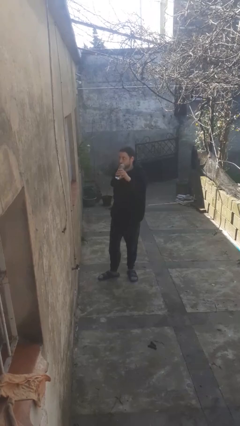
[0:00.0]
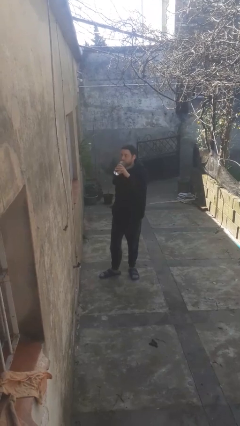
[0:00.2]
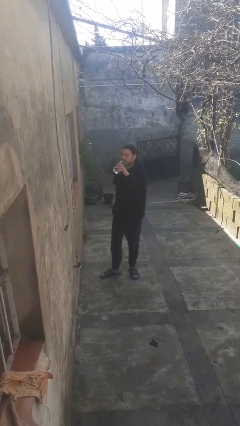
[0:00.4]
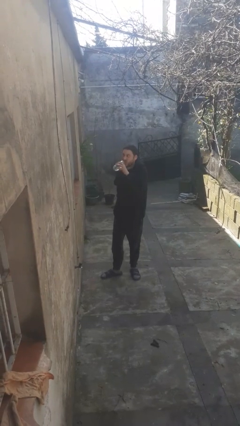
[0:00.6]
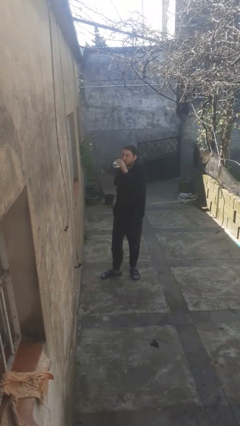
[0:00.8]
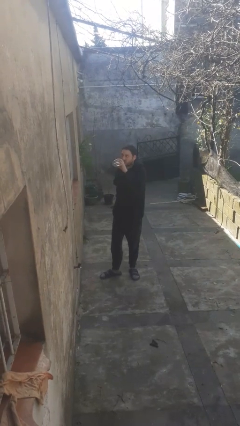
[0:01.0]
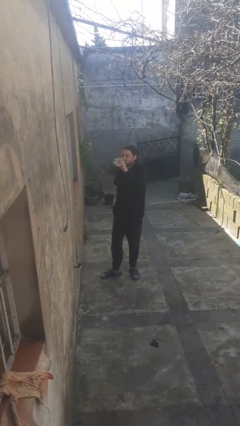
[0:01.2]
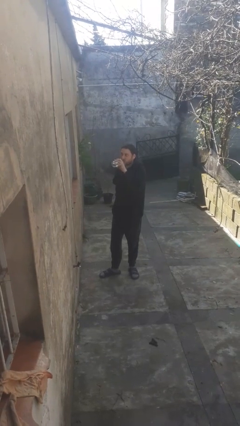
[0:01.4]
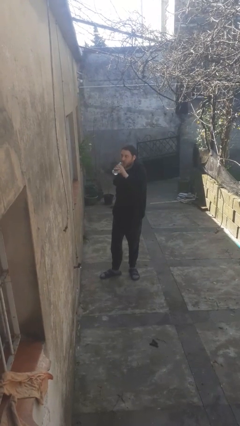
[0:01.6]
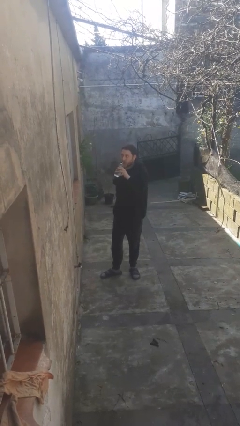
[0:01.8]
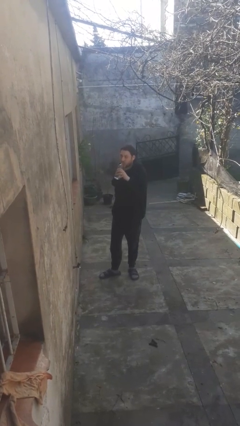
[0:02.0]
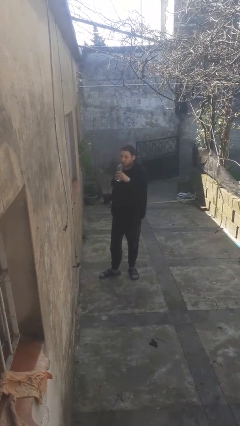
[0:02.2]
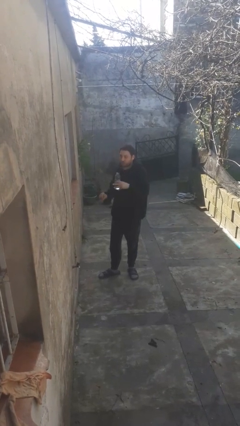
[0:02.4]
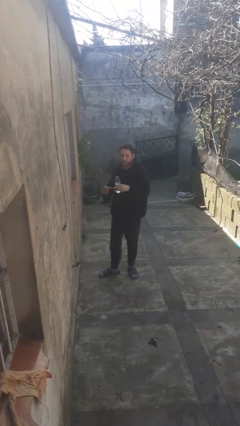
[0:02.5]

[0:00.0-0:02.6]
person drinks from bottle

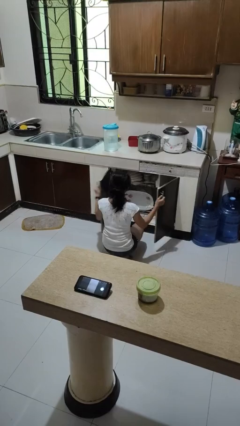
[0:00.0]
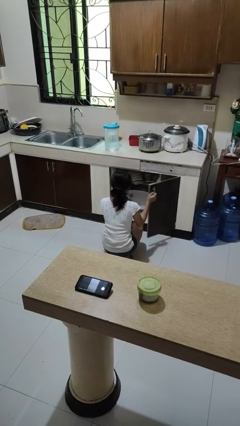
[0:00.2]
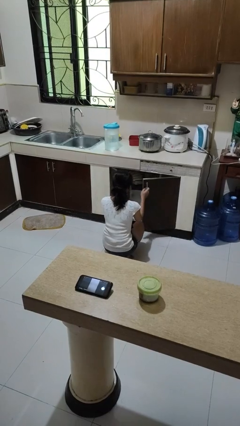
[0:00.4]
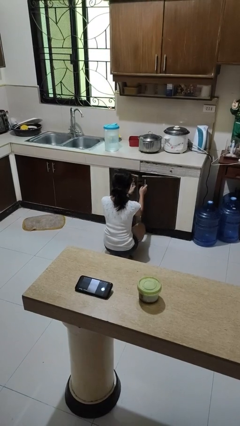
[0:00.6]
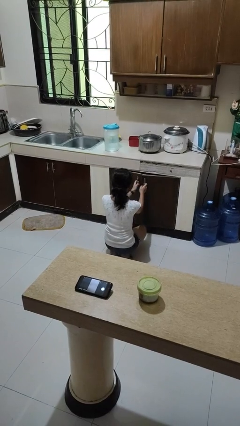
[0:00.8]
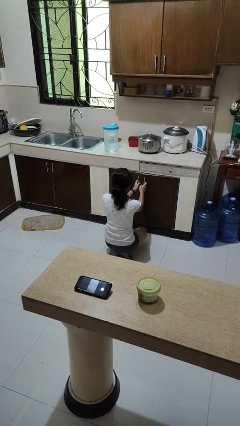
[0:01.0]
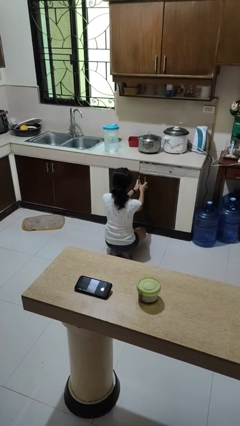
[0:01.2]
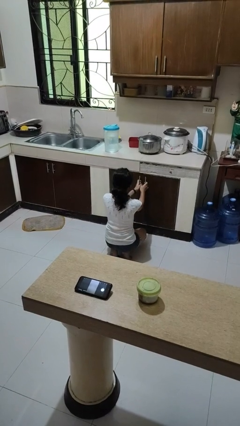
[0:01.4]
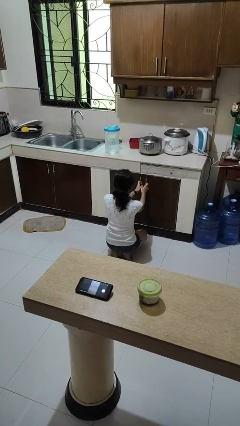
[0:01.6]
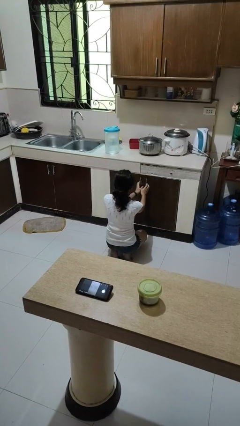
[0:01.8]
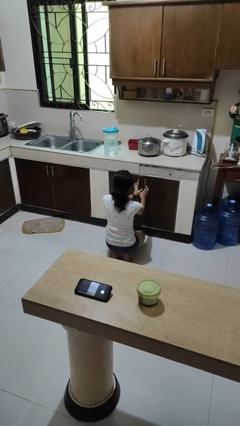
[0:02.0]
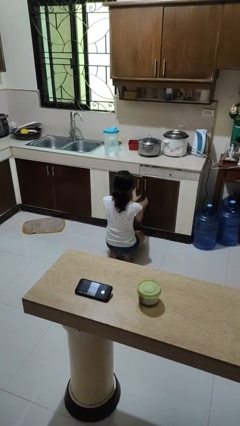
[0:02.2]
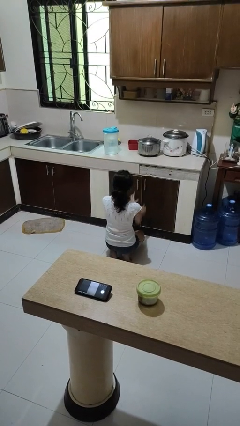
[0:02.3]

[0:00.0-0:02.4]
person closes dishwasher

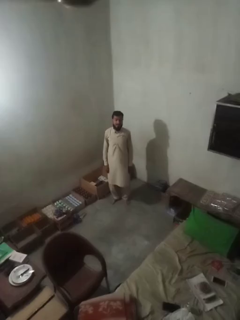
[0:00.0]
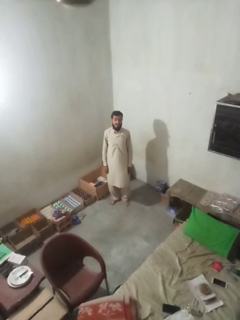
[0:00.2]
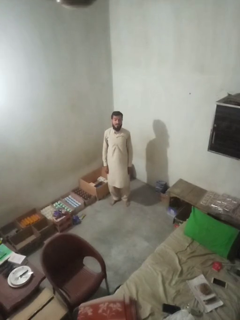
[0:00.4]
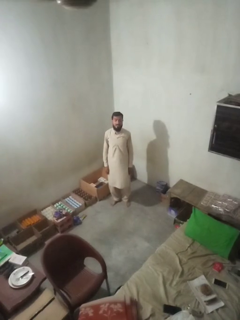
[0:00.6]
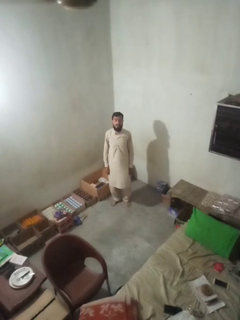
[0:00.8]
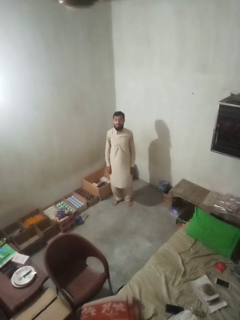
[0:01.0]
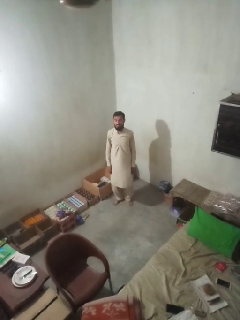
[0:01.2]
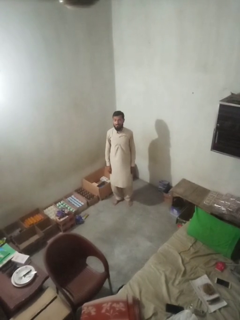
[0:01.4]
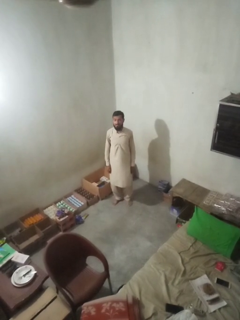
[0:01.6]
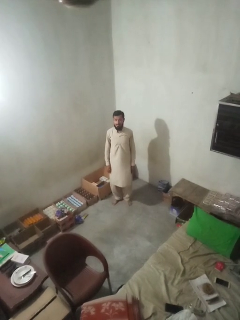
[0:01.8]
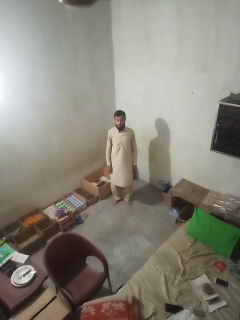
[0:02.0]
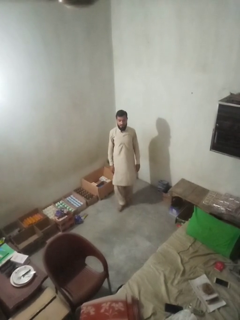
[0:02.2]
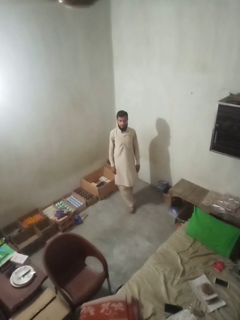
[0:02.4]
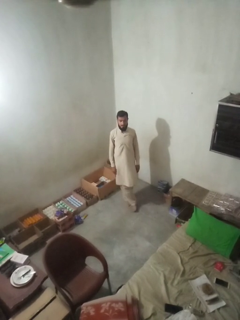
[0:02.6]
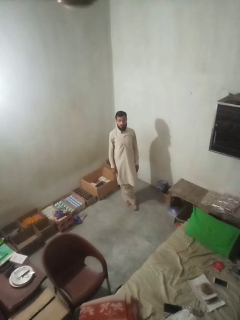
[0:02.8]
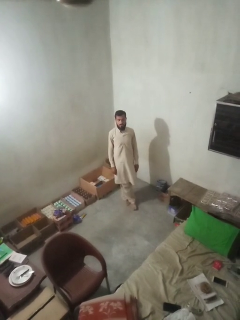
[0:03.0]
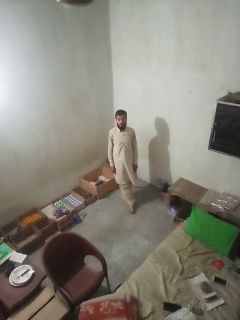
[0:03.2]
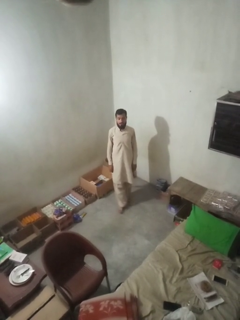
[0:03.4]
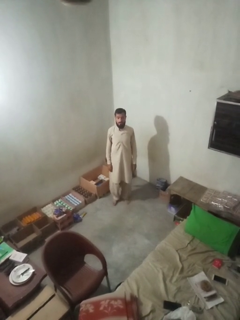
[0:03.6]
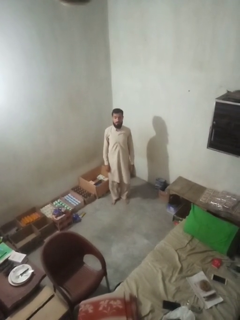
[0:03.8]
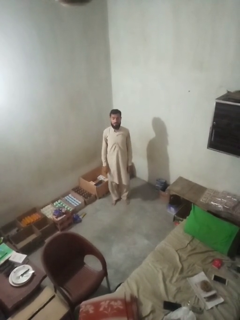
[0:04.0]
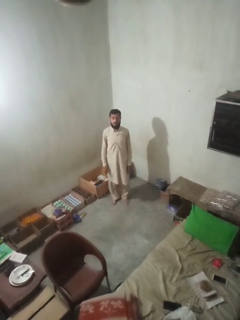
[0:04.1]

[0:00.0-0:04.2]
person crosses legs

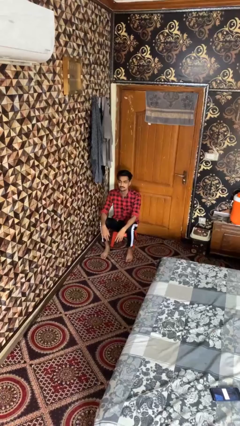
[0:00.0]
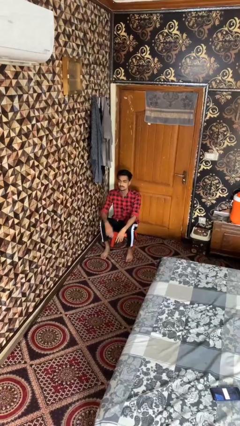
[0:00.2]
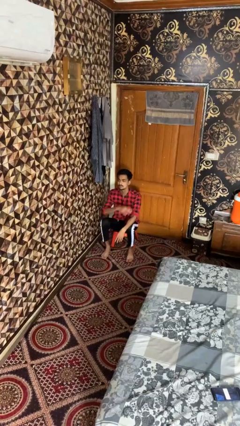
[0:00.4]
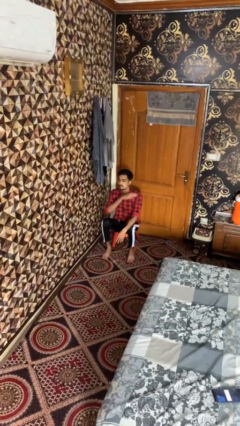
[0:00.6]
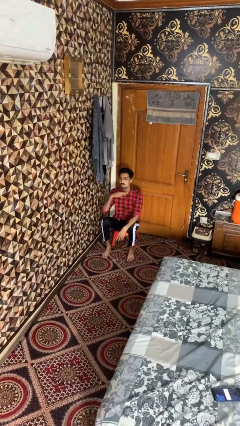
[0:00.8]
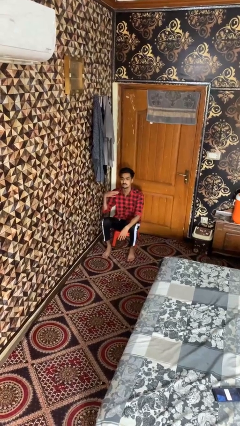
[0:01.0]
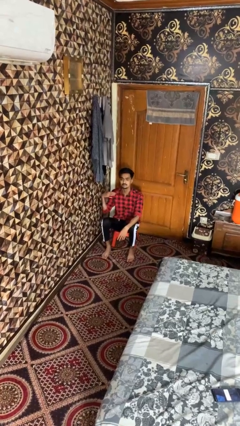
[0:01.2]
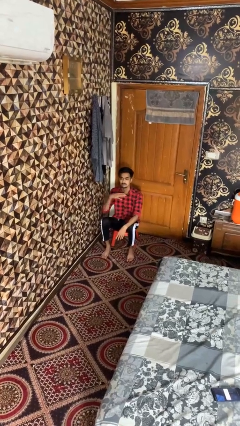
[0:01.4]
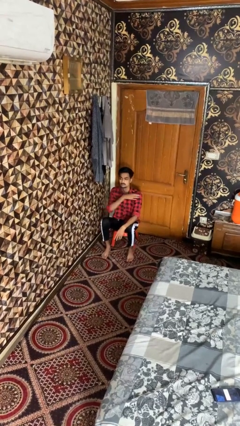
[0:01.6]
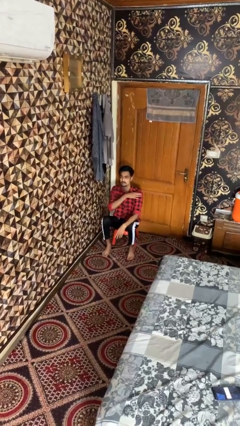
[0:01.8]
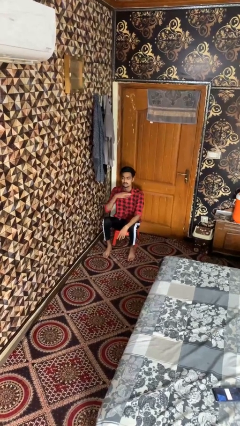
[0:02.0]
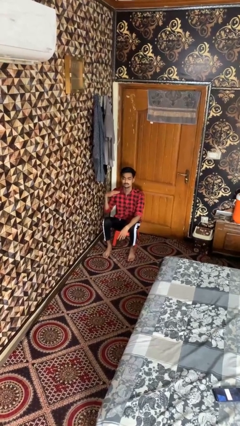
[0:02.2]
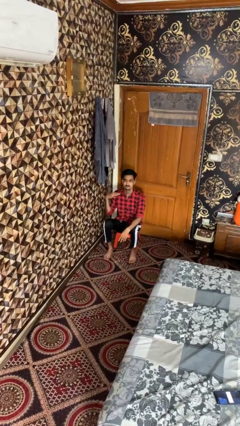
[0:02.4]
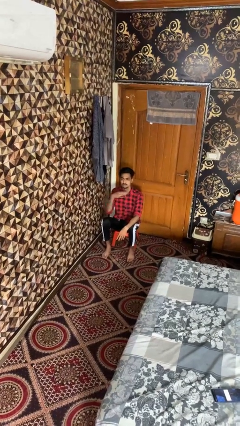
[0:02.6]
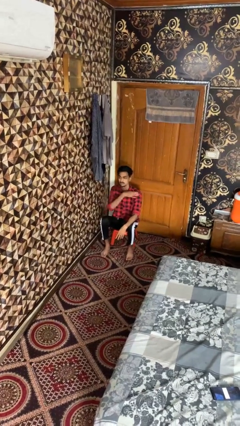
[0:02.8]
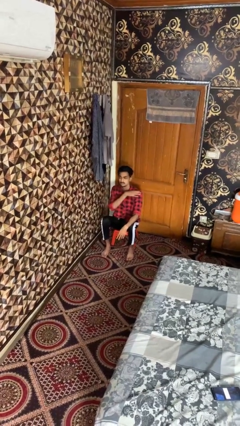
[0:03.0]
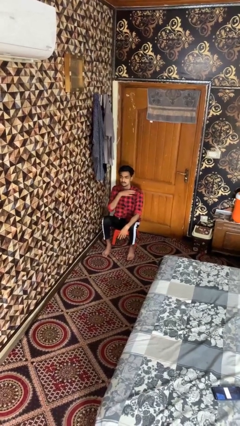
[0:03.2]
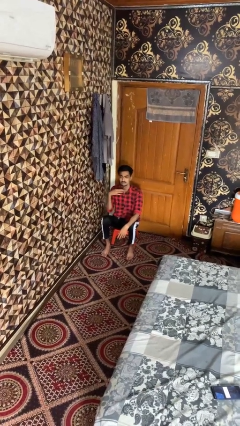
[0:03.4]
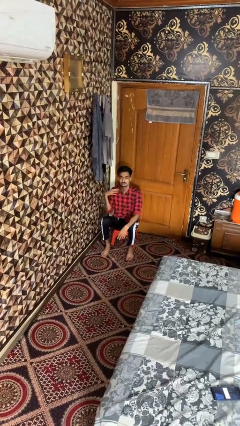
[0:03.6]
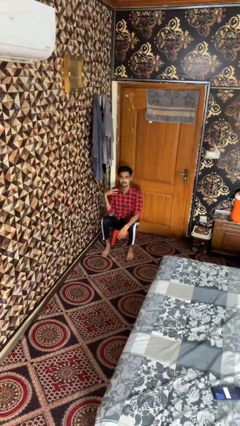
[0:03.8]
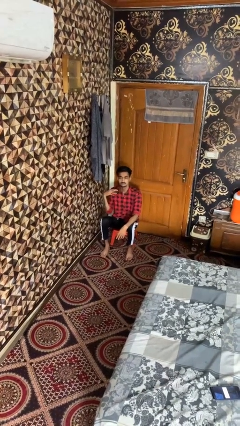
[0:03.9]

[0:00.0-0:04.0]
person gestures cut

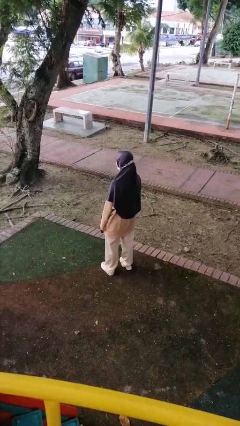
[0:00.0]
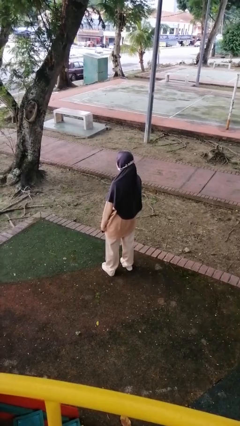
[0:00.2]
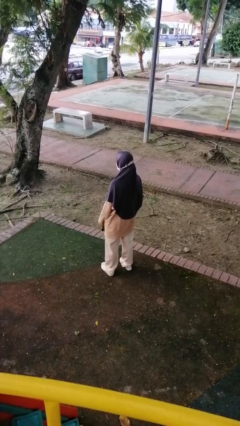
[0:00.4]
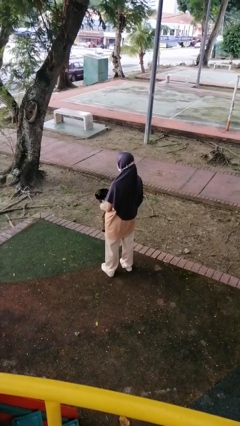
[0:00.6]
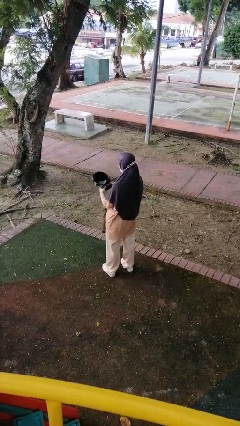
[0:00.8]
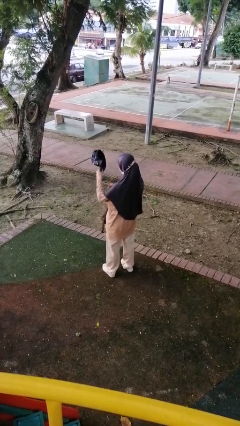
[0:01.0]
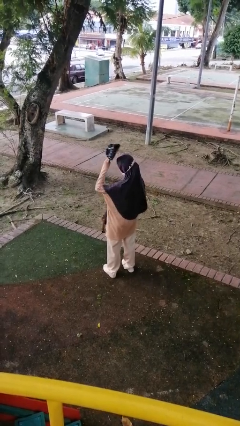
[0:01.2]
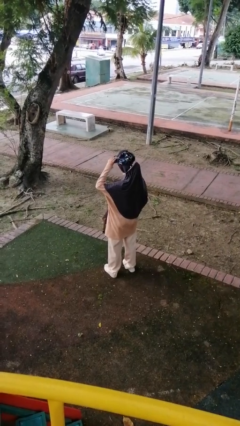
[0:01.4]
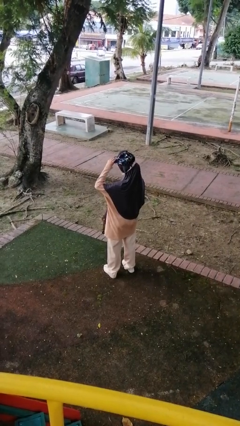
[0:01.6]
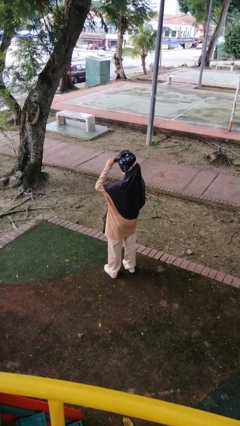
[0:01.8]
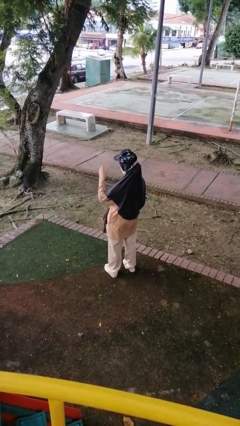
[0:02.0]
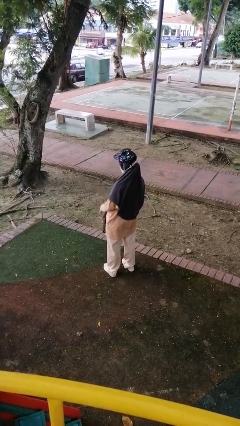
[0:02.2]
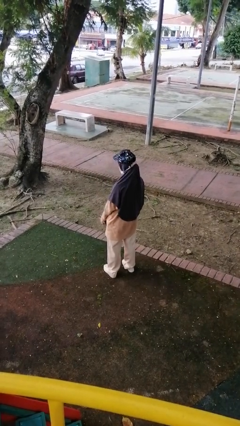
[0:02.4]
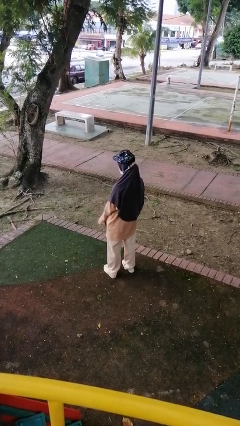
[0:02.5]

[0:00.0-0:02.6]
person puts on hat

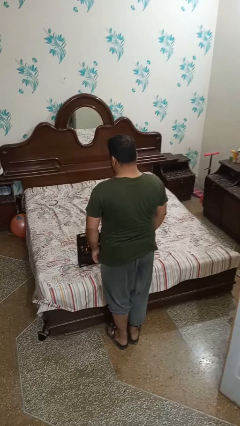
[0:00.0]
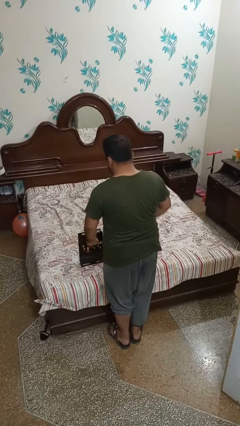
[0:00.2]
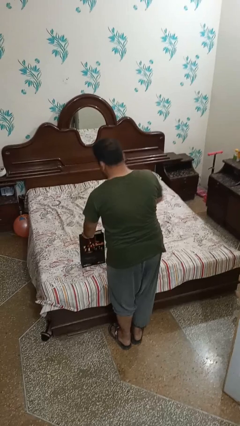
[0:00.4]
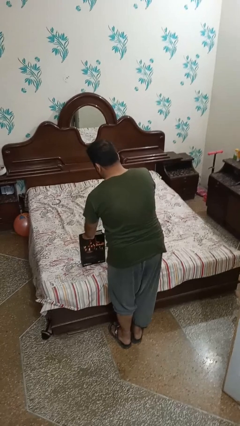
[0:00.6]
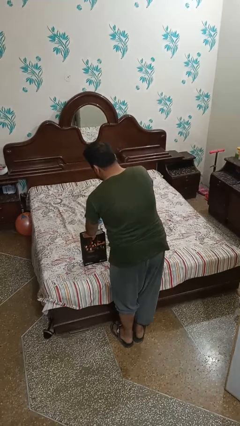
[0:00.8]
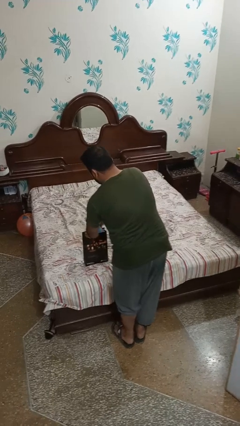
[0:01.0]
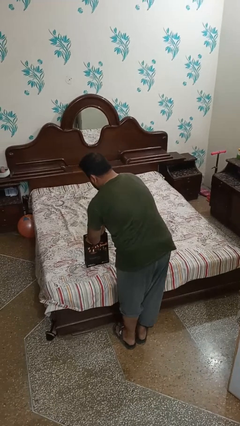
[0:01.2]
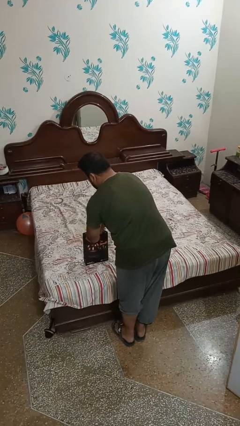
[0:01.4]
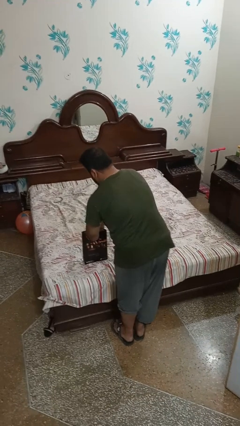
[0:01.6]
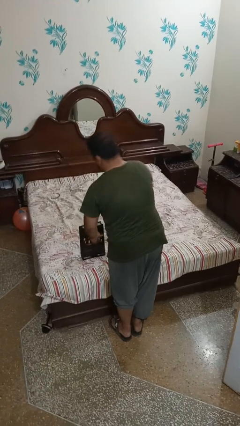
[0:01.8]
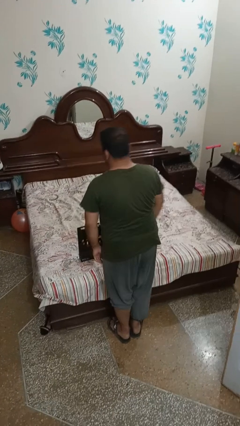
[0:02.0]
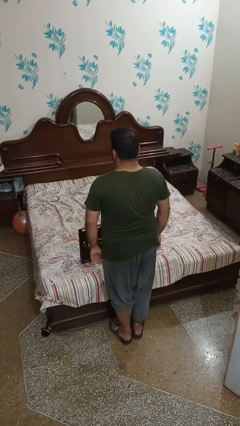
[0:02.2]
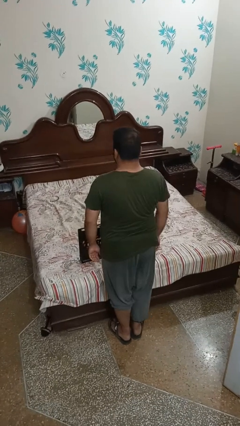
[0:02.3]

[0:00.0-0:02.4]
person puts object into bag
